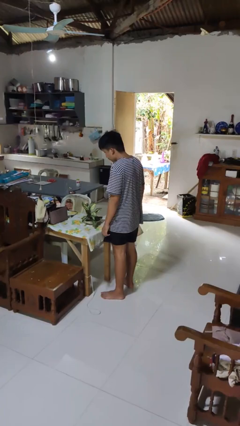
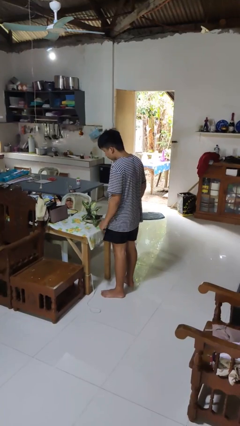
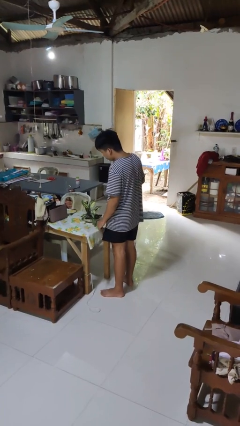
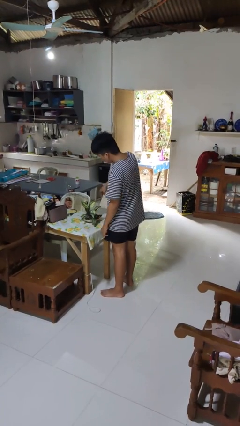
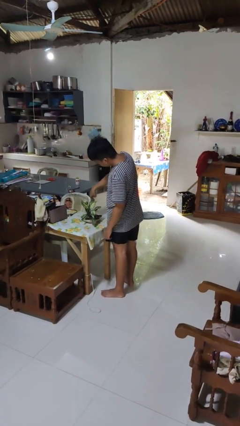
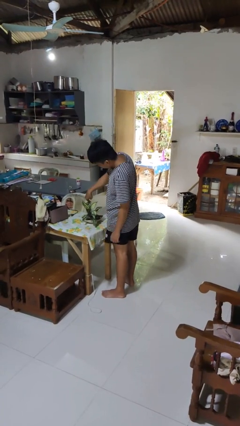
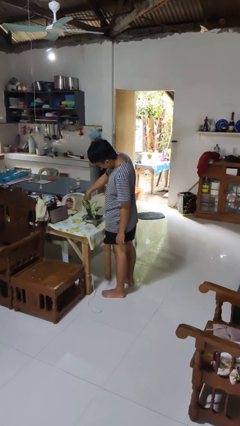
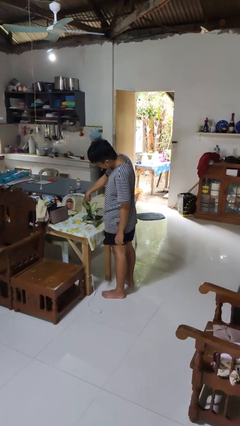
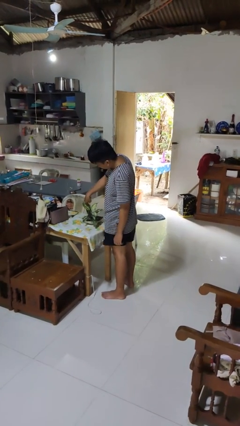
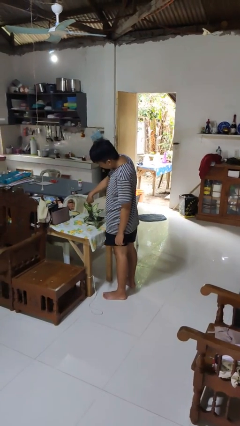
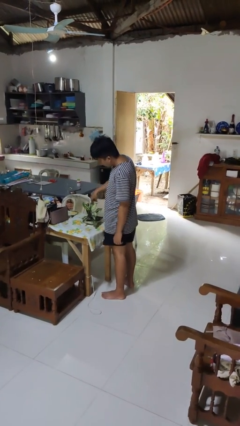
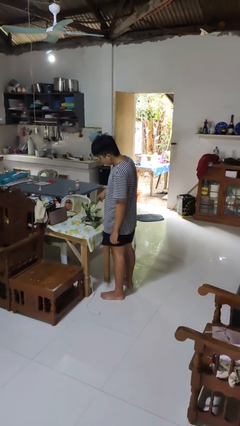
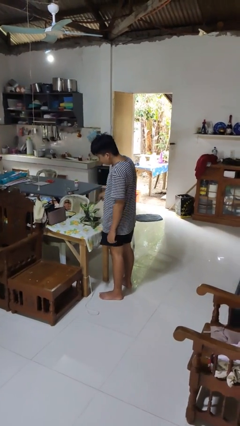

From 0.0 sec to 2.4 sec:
person waters houseplant

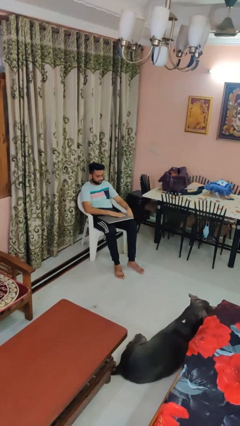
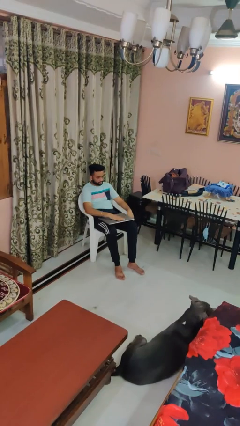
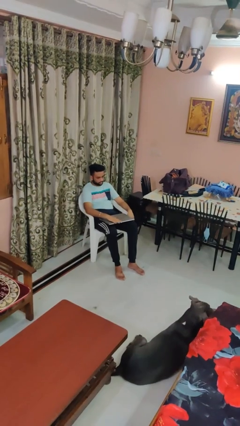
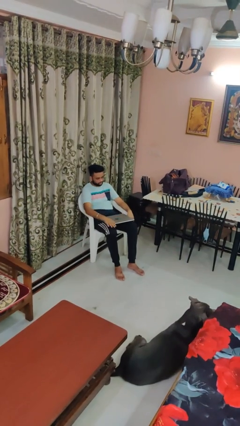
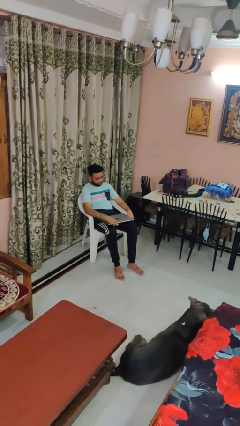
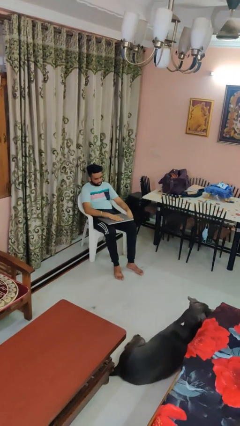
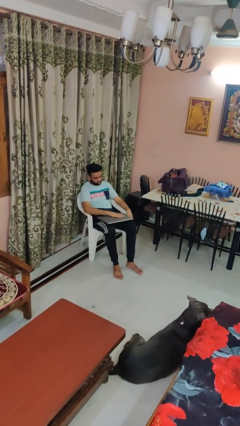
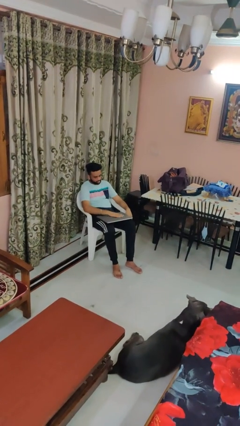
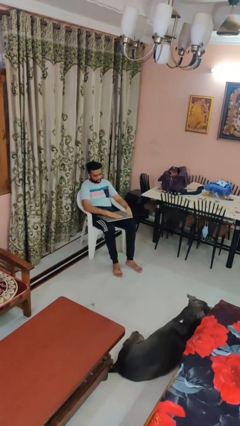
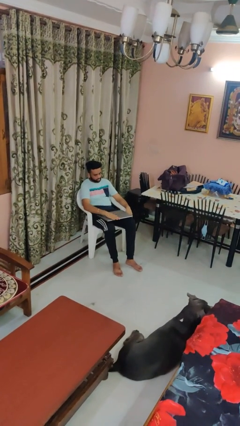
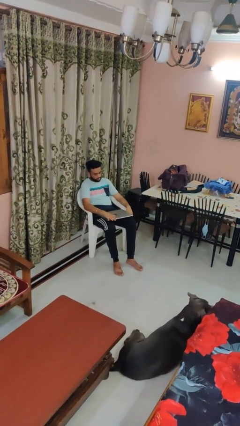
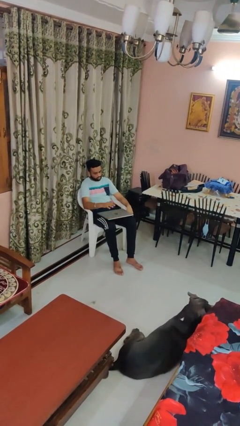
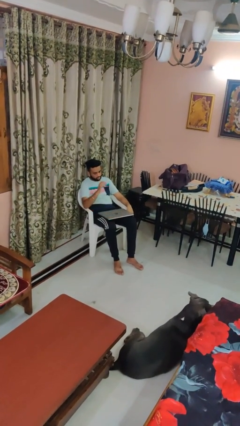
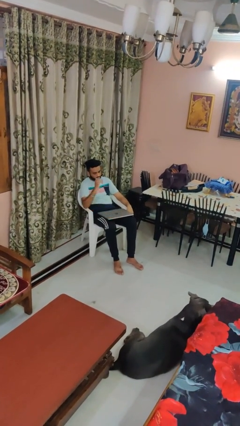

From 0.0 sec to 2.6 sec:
person waves hand over object

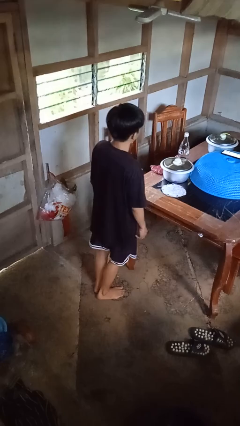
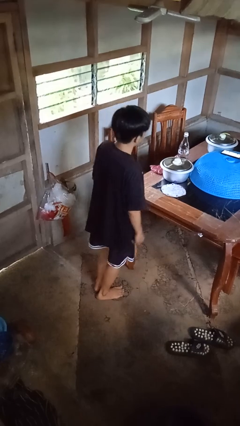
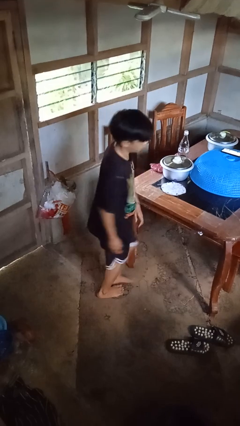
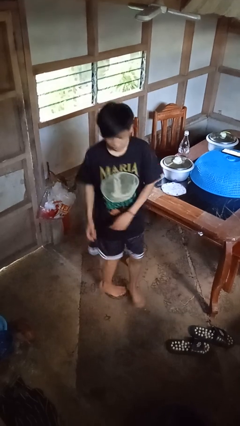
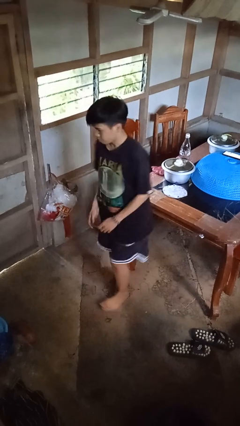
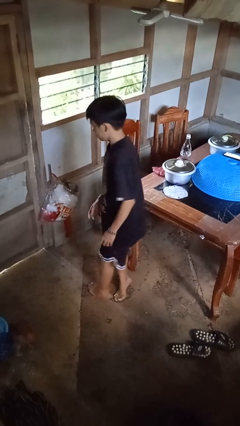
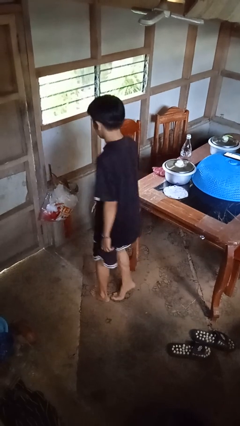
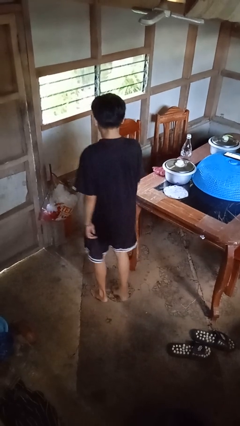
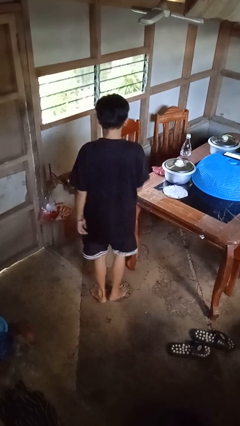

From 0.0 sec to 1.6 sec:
person twirls

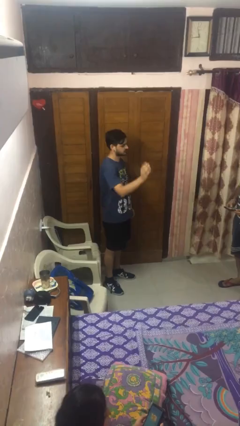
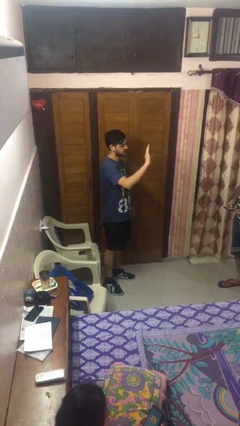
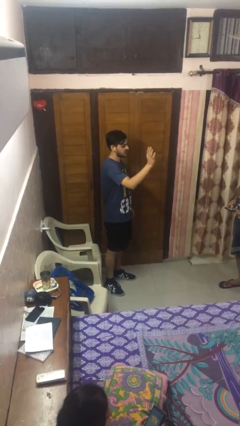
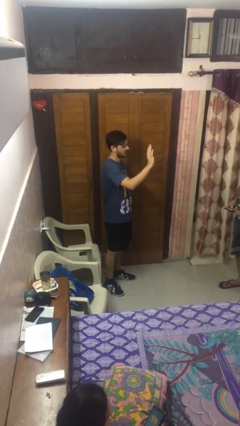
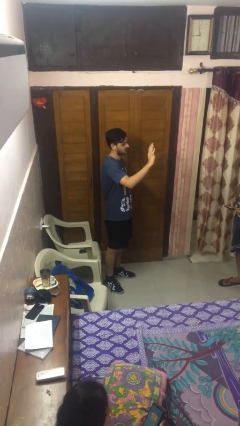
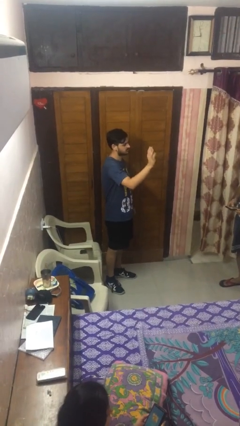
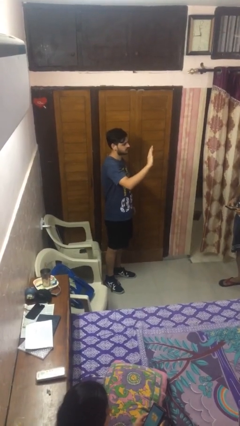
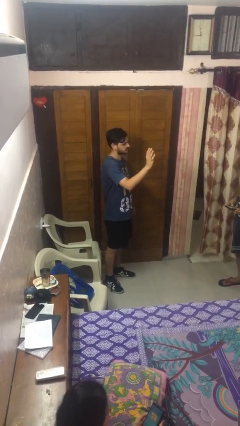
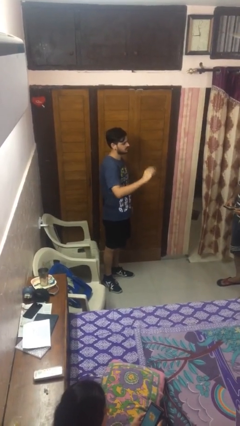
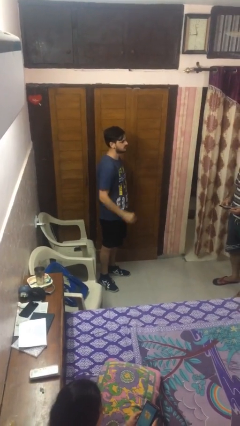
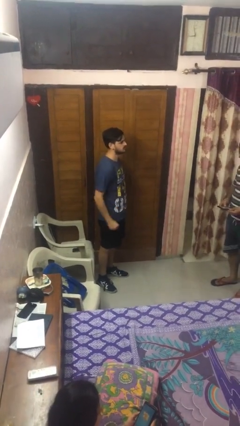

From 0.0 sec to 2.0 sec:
person waves at person

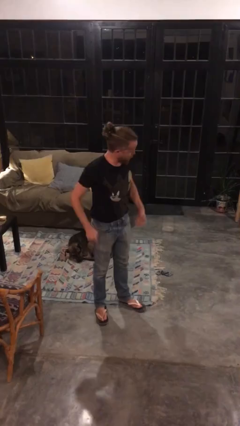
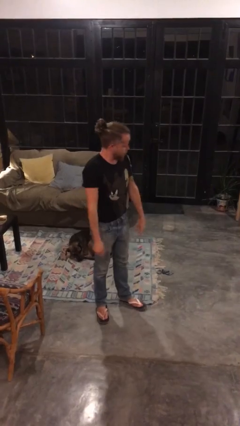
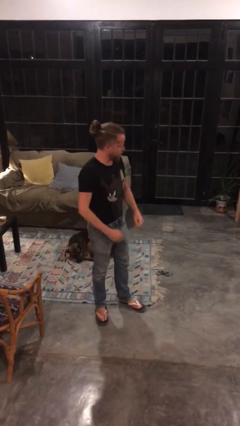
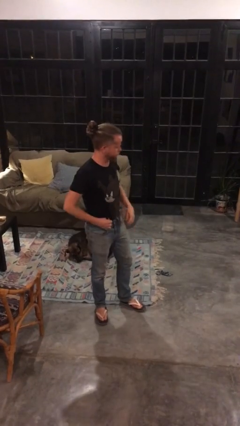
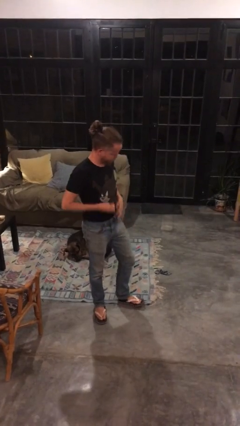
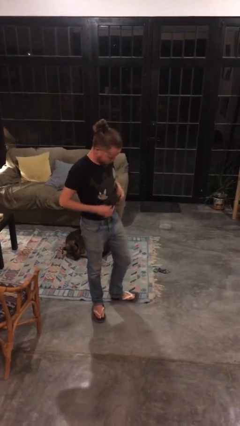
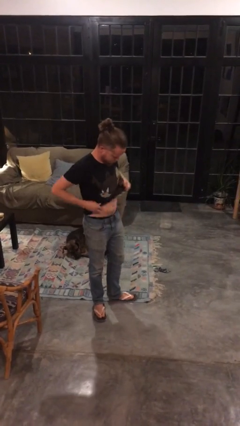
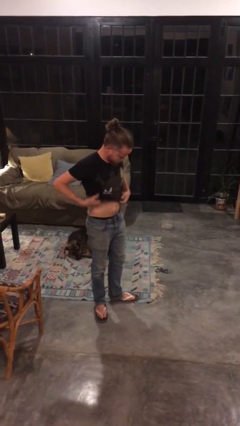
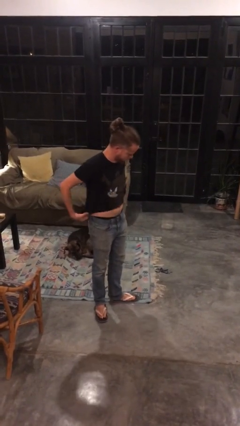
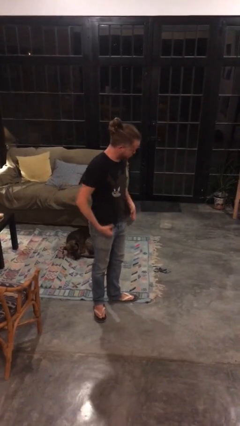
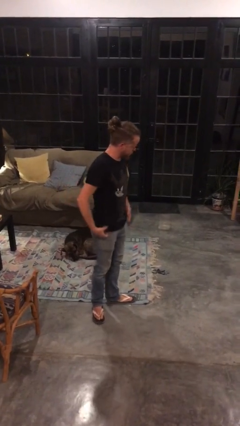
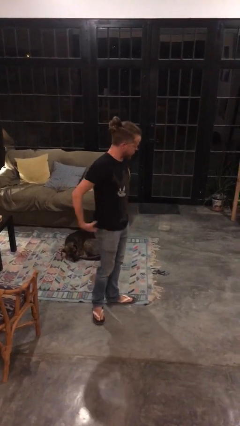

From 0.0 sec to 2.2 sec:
person untucks shirt

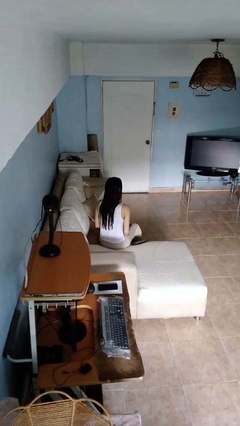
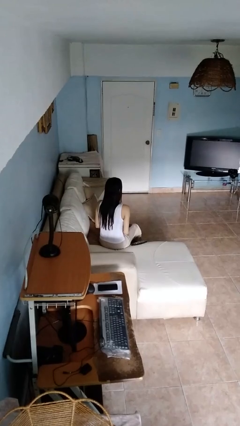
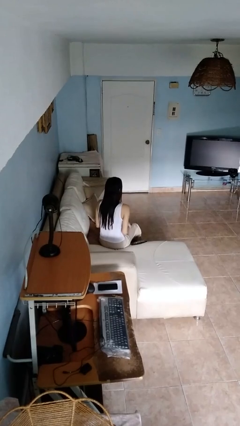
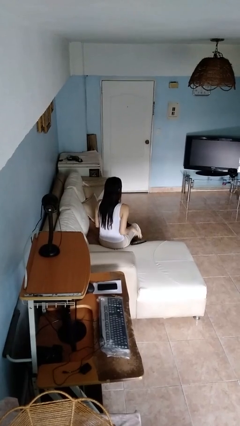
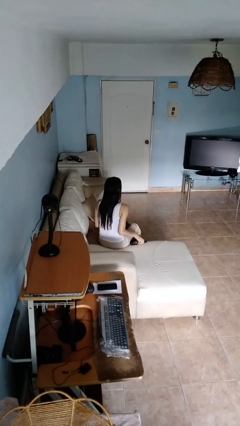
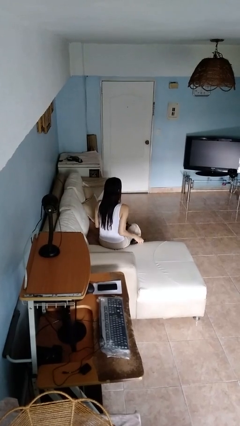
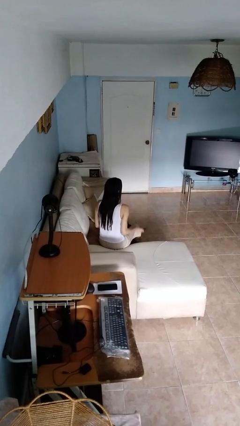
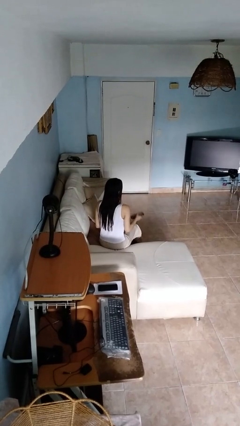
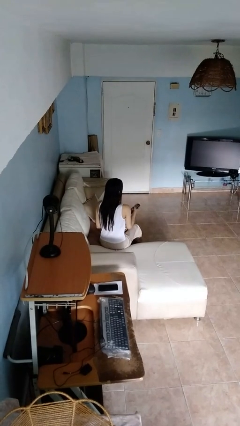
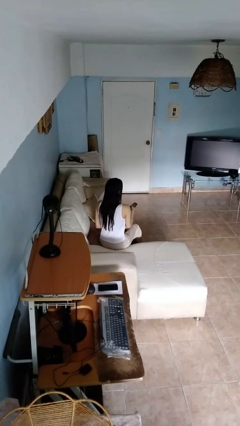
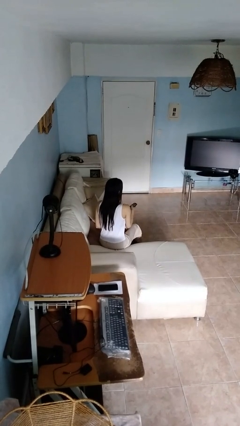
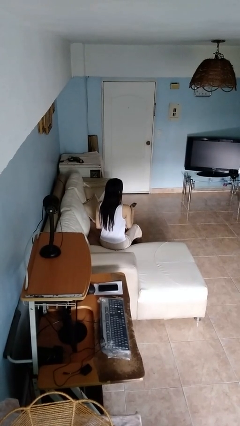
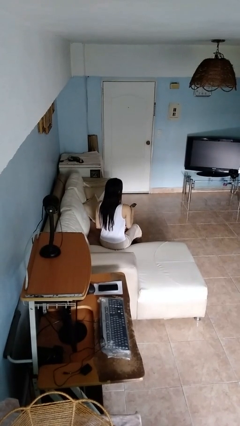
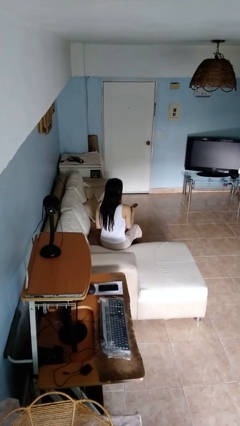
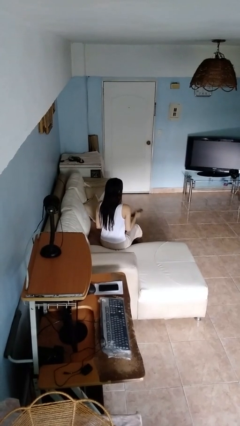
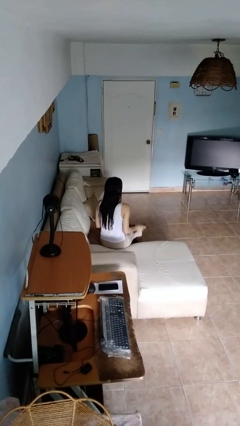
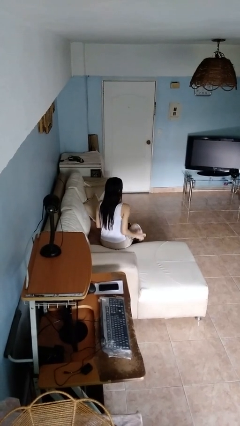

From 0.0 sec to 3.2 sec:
person uses television remote

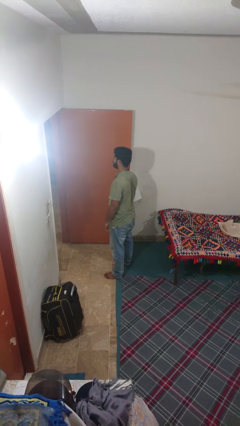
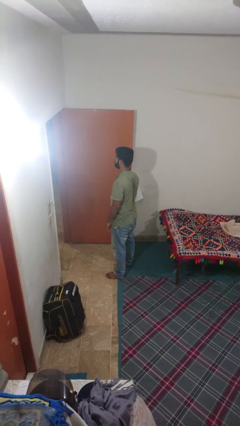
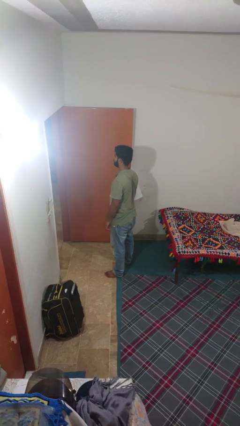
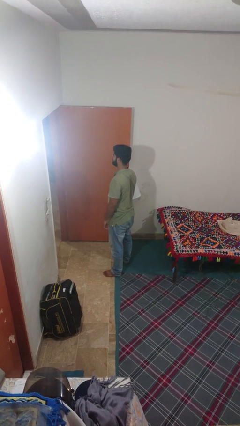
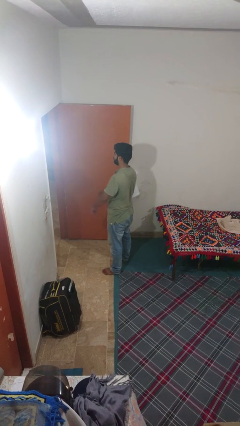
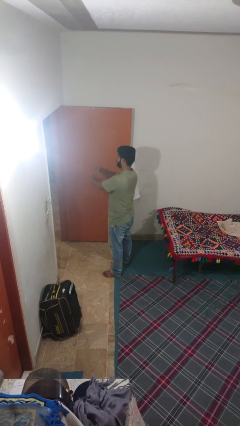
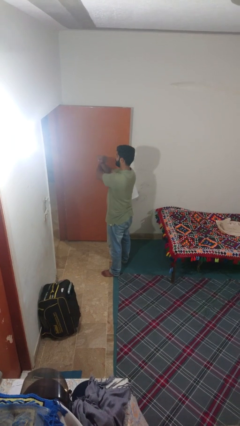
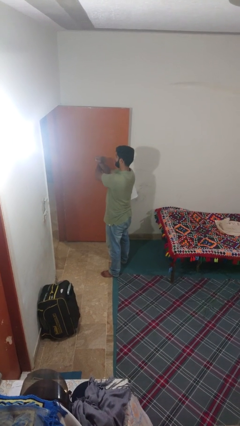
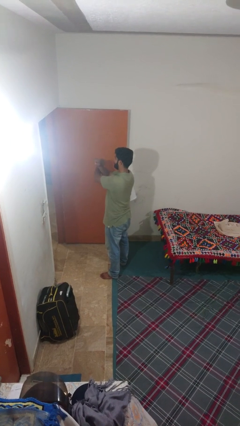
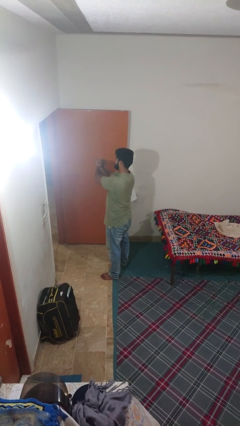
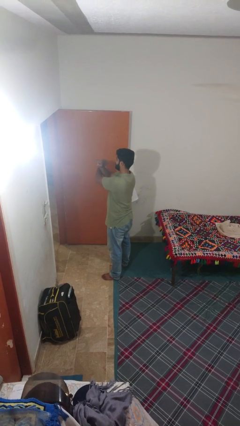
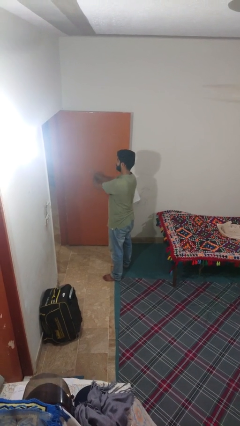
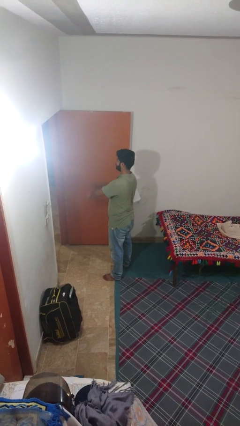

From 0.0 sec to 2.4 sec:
person crosses arms

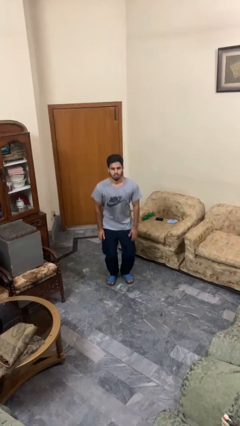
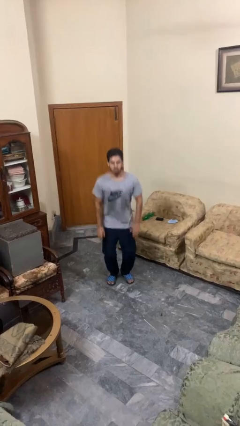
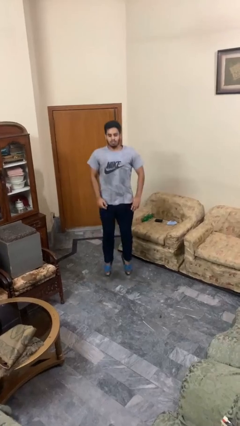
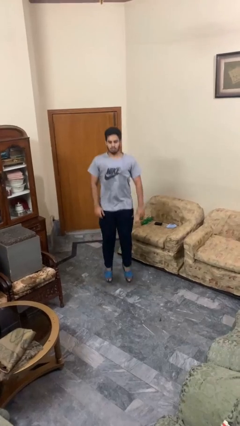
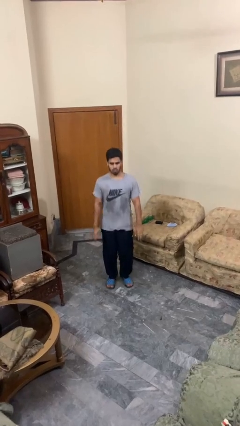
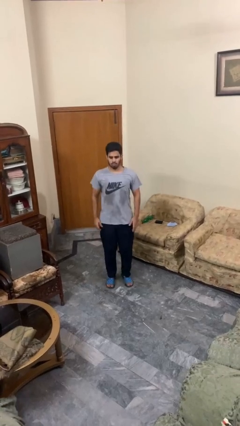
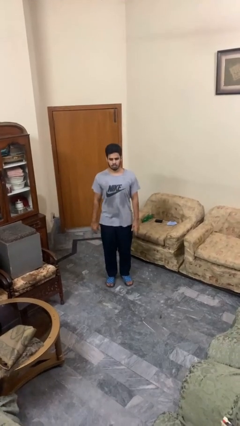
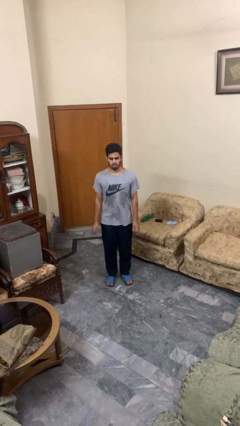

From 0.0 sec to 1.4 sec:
person jumps
